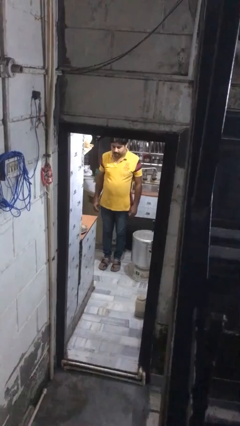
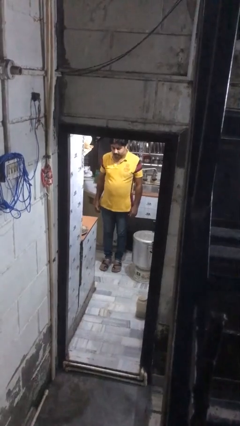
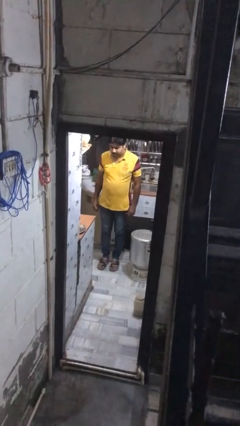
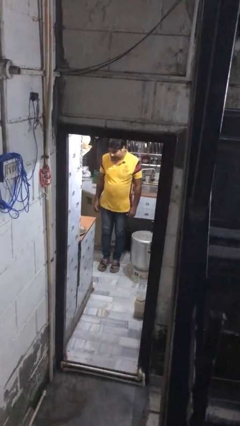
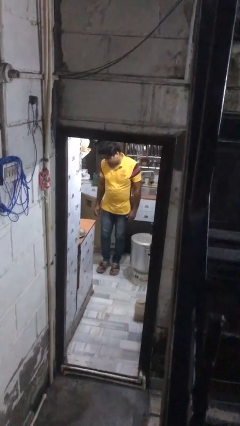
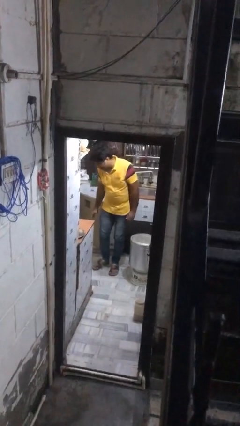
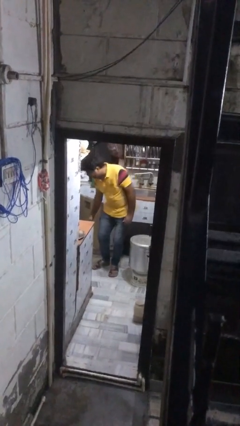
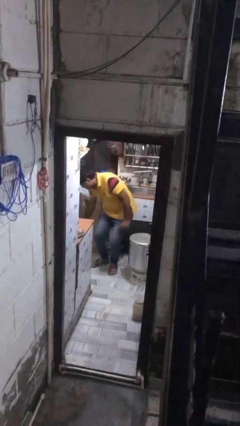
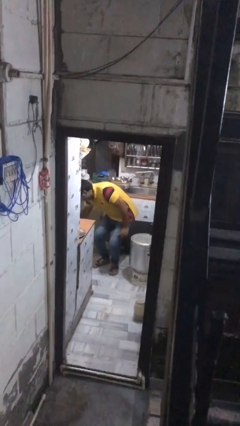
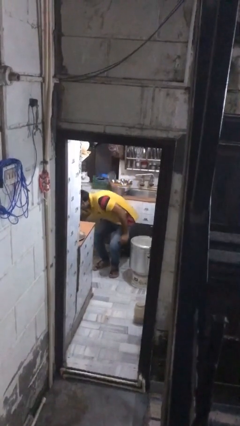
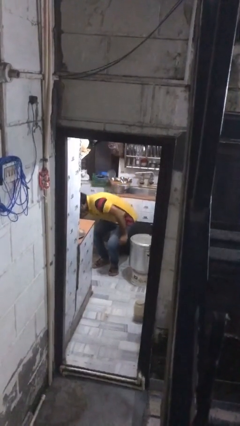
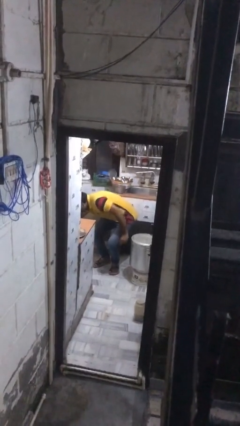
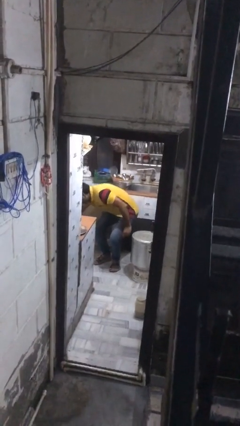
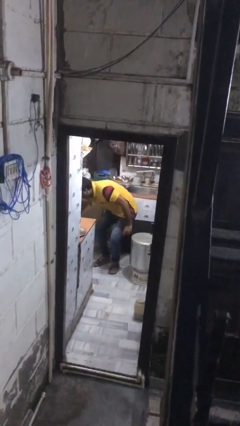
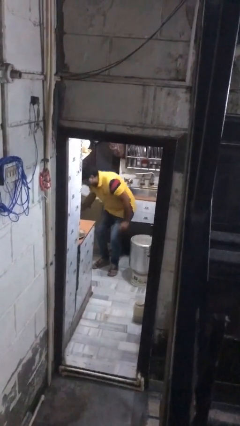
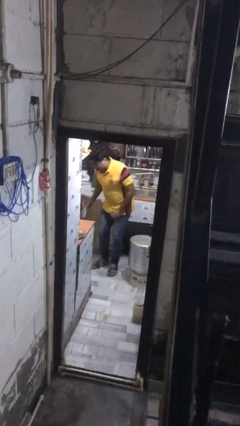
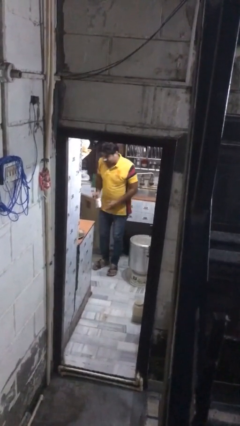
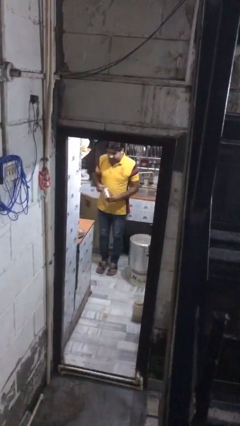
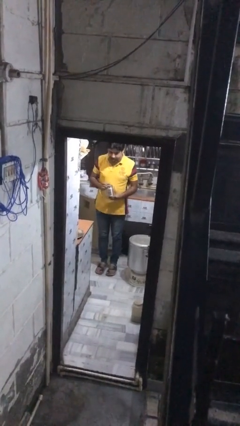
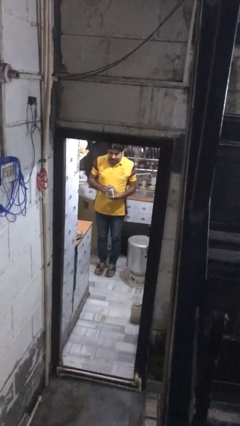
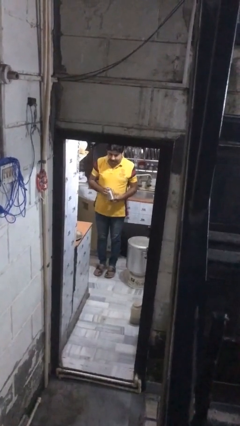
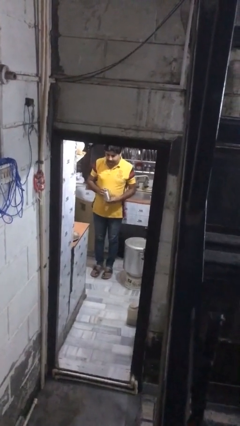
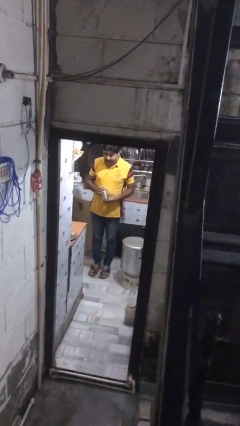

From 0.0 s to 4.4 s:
person takes object from kitchen drawer

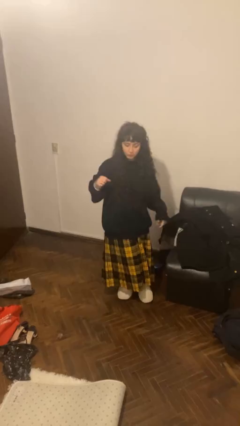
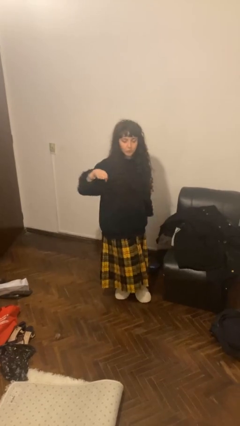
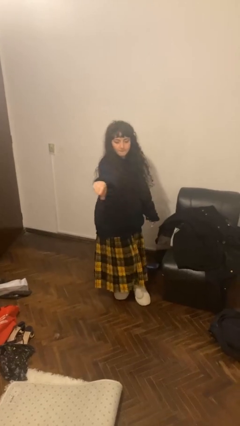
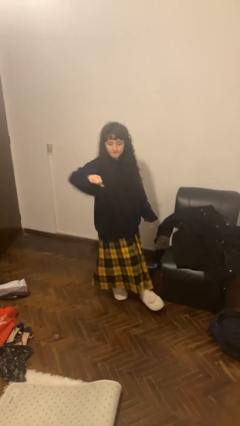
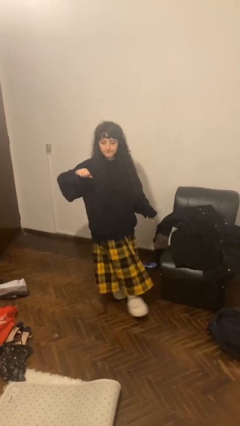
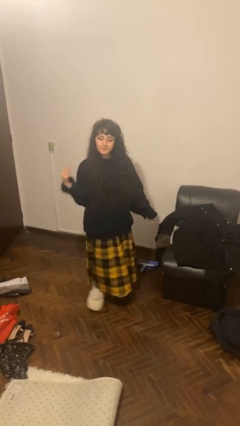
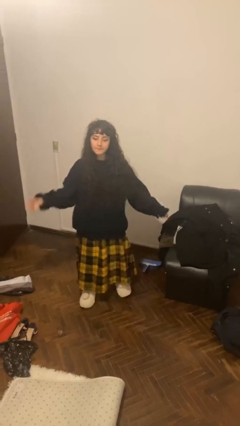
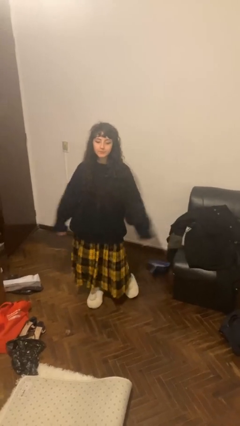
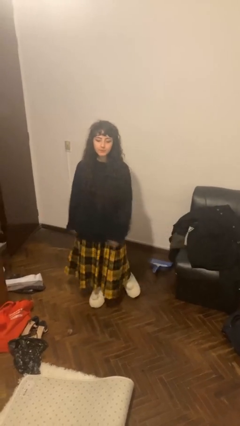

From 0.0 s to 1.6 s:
person punches

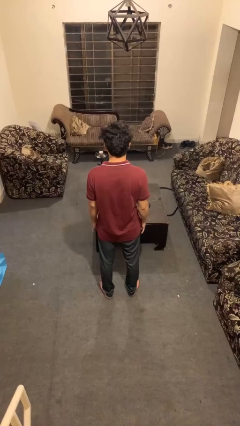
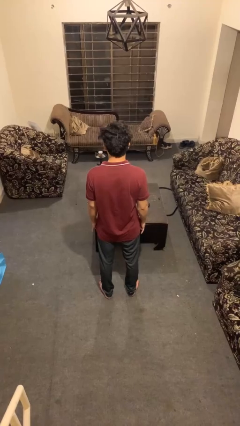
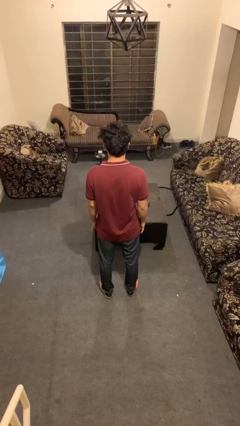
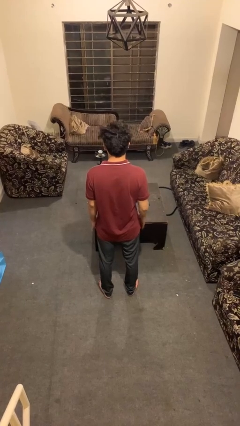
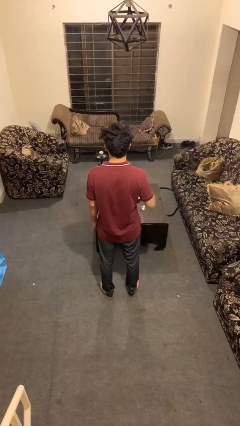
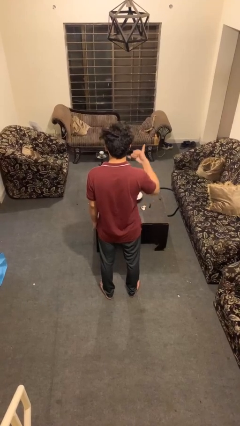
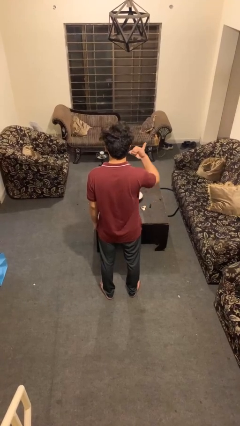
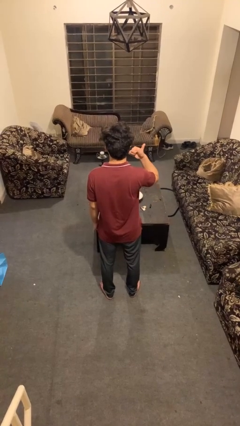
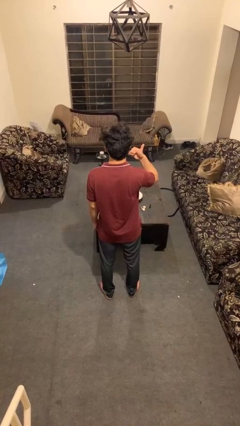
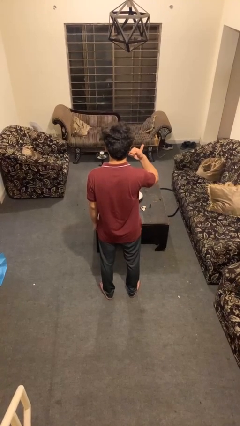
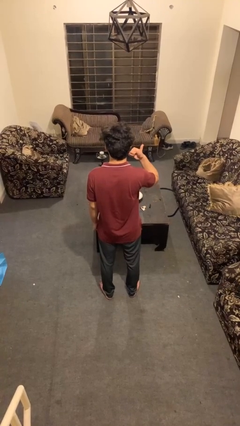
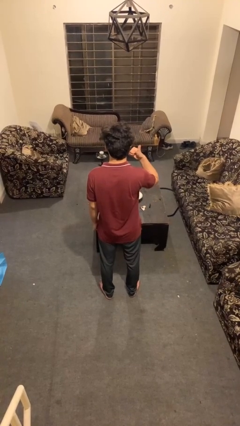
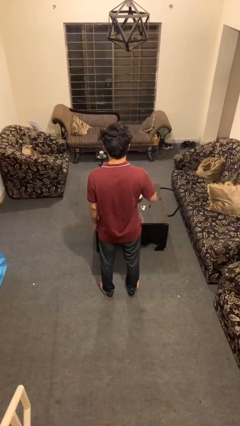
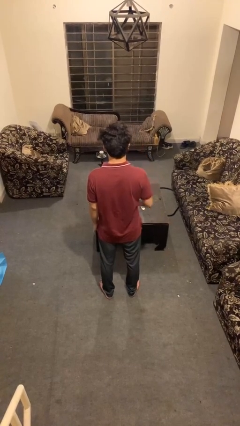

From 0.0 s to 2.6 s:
person gestures call me

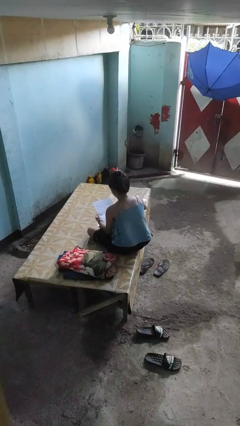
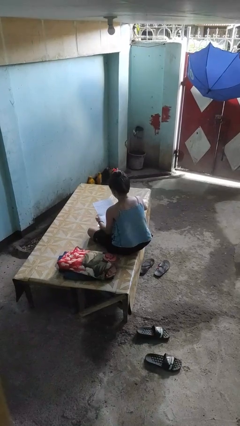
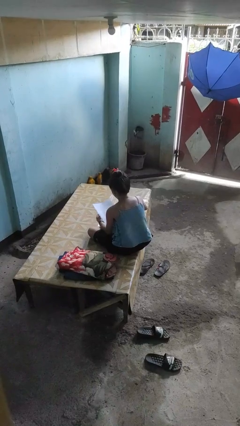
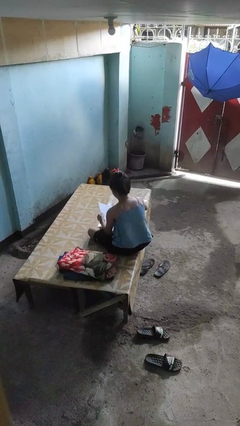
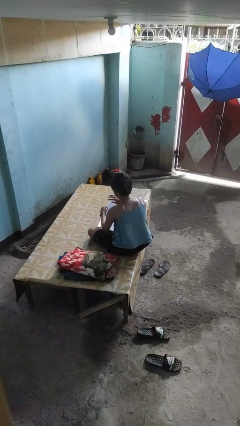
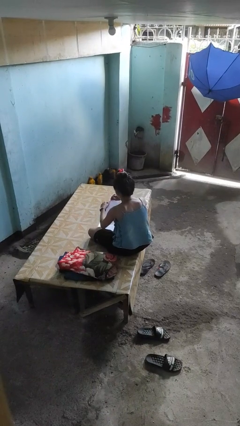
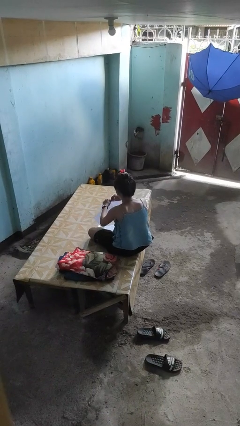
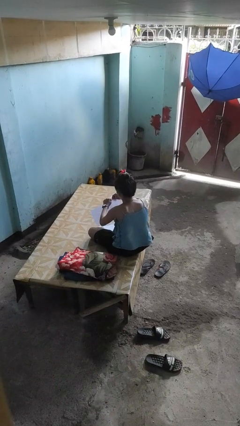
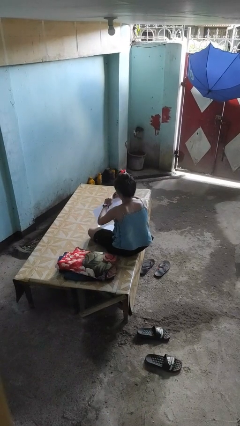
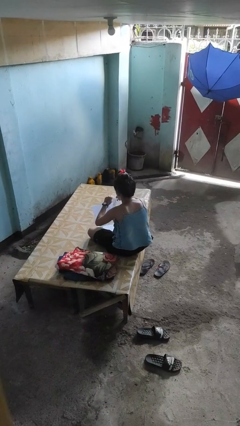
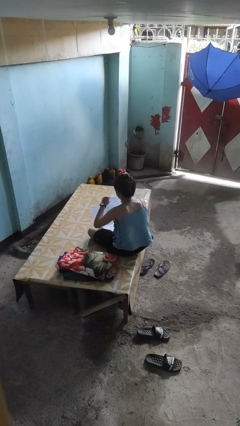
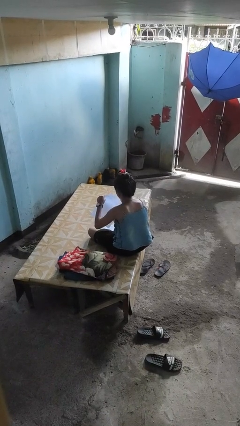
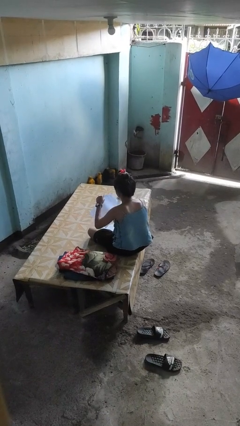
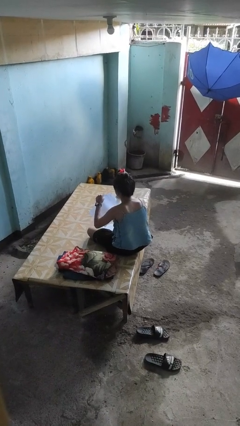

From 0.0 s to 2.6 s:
person tears paper

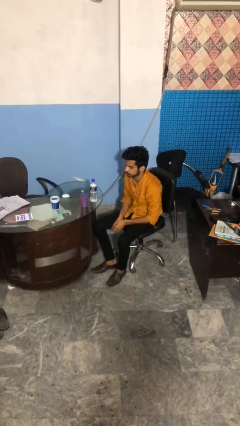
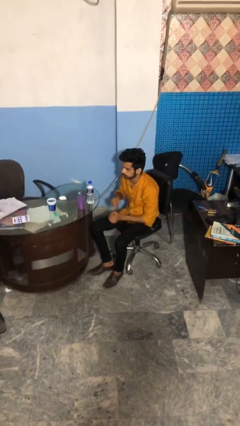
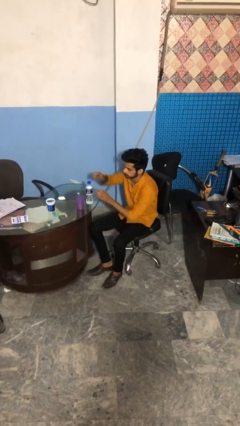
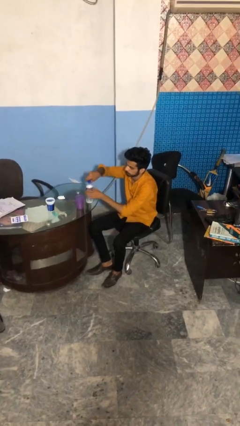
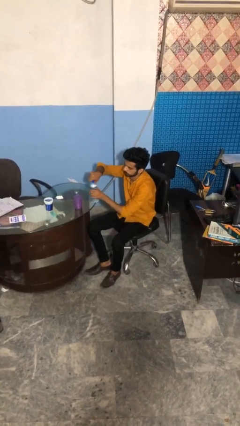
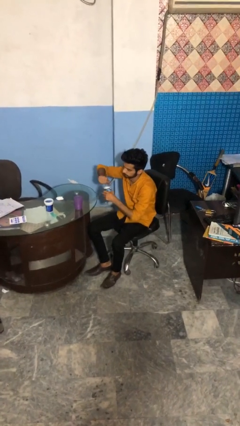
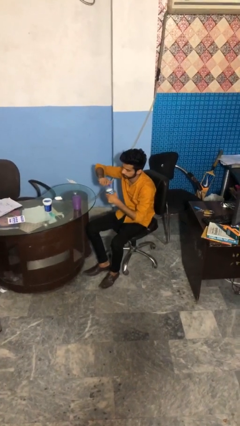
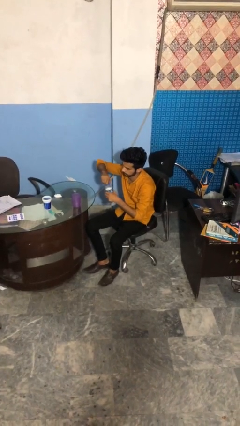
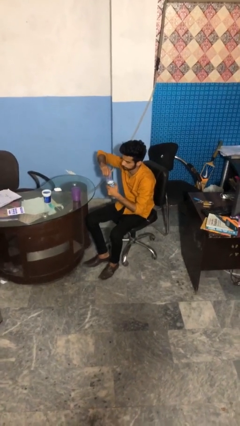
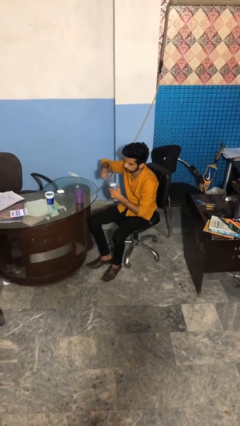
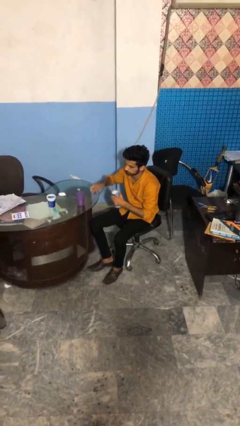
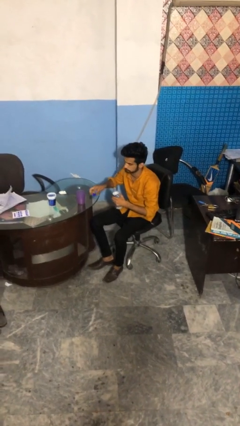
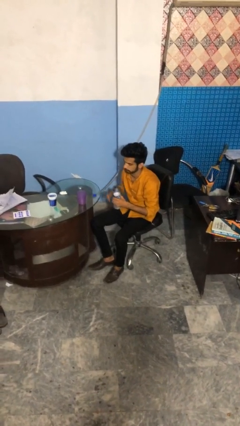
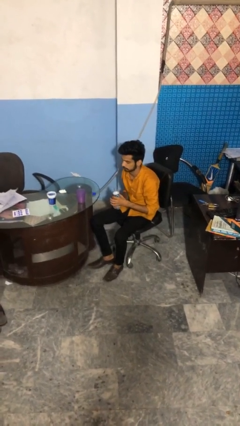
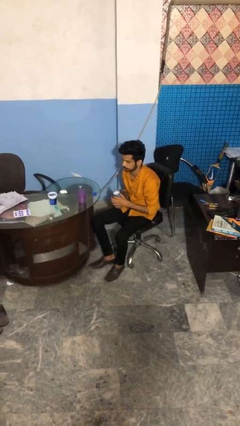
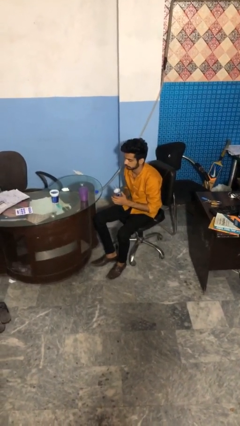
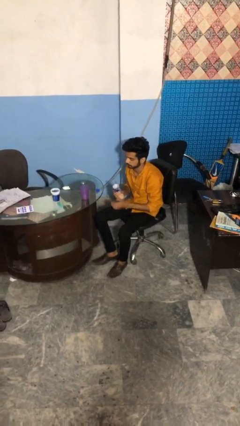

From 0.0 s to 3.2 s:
person unscrews lid from bottle

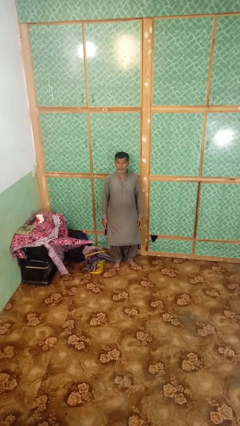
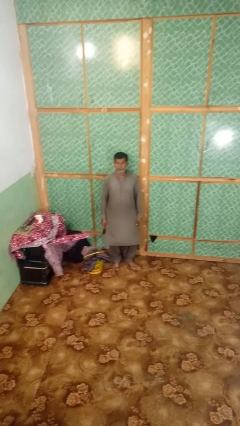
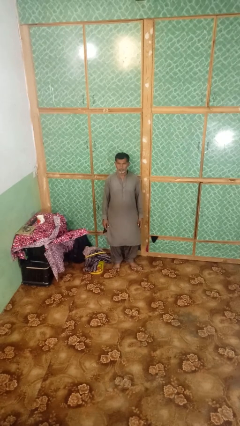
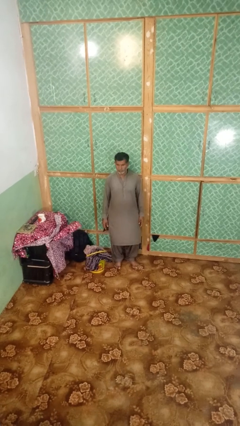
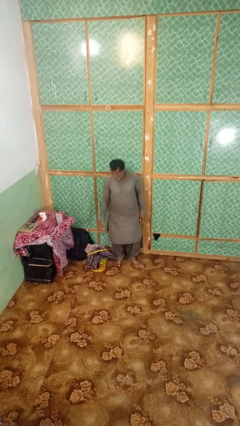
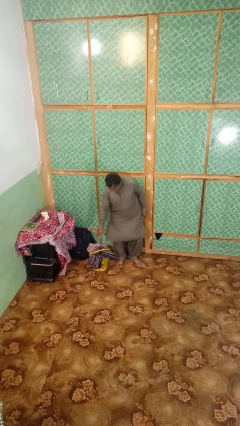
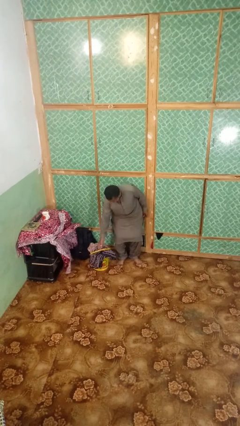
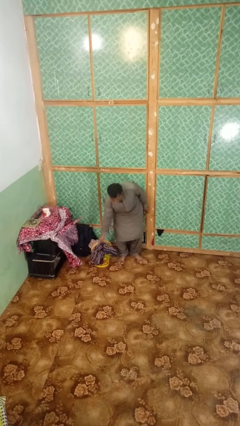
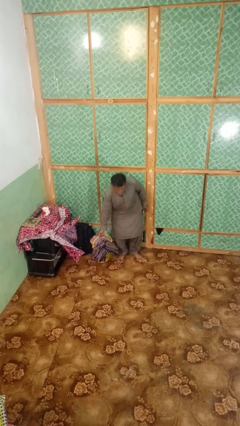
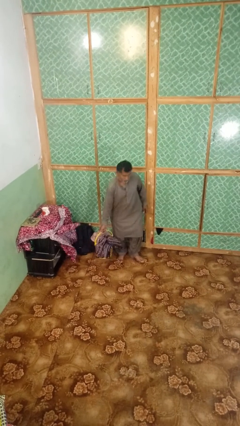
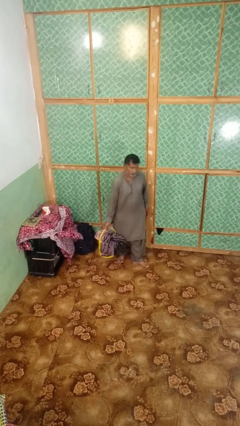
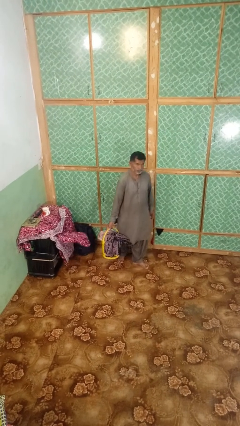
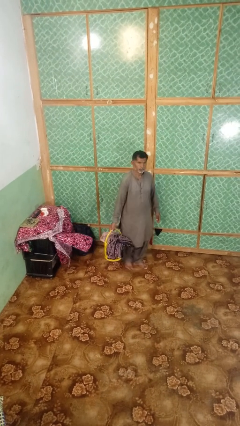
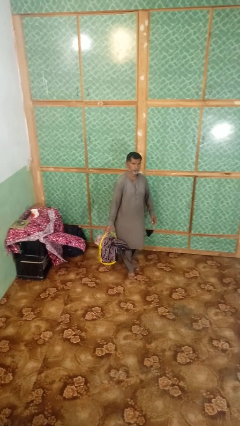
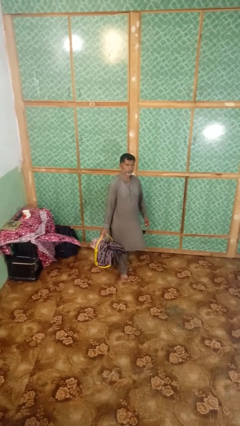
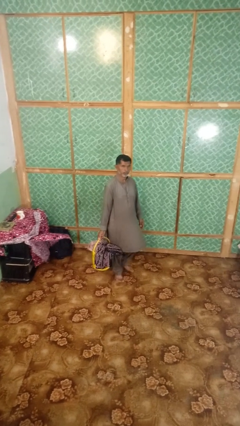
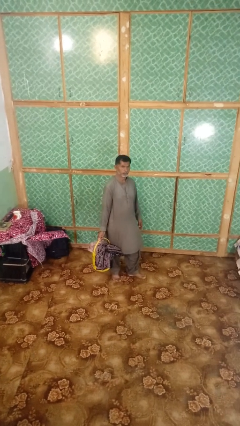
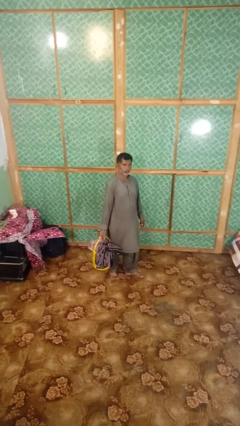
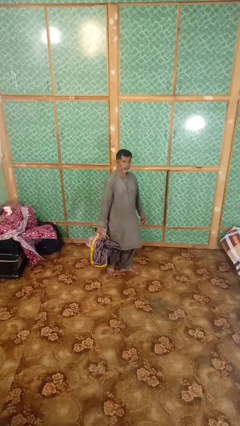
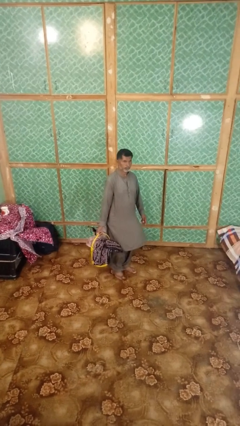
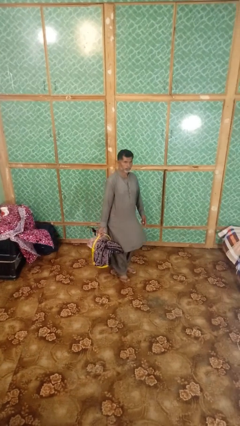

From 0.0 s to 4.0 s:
person carries laundry basket
